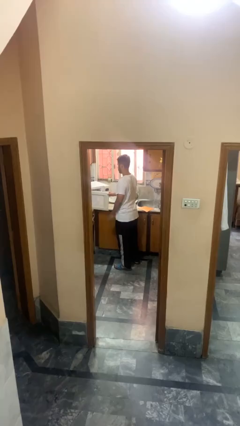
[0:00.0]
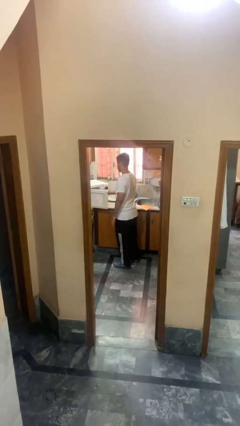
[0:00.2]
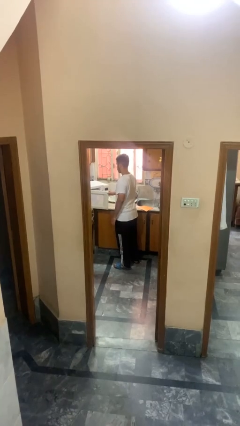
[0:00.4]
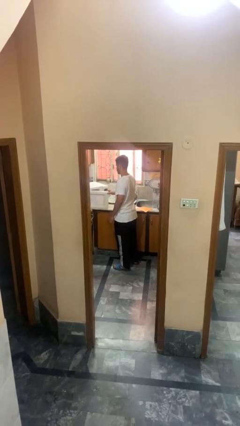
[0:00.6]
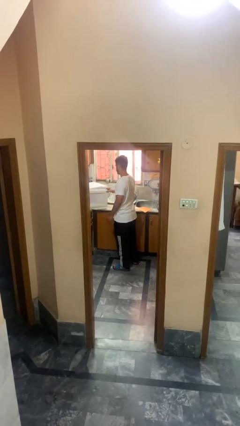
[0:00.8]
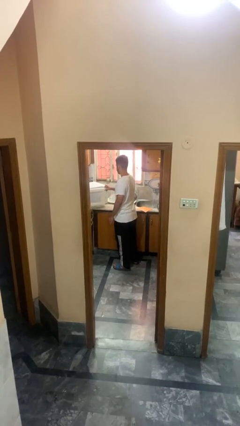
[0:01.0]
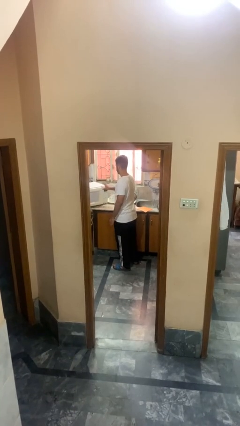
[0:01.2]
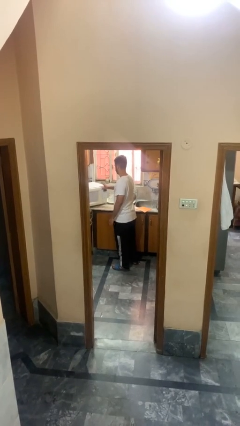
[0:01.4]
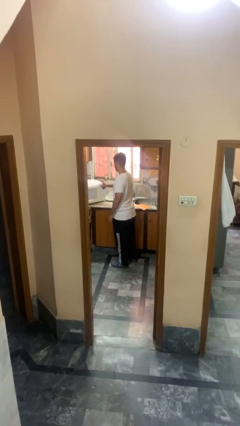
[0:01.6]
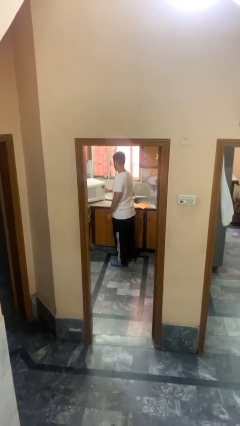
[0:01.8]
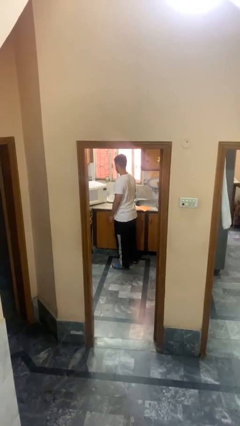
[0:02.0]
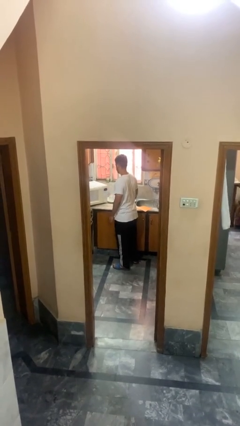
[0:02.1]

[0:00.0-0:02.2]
person closes microwave

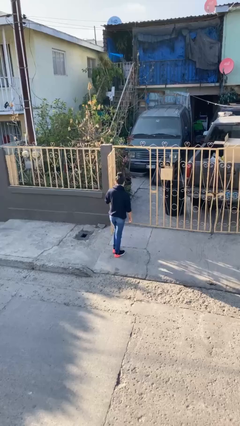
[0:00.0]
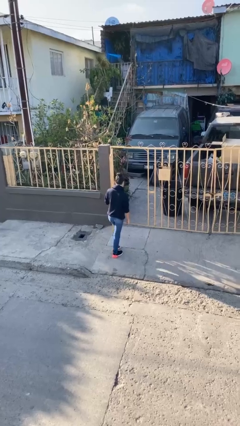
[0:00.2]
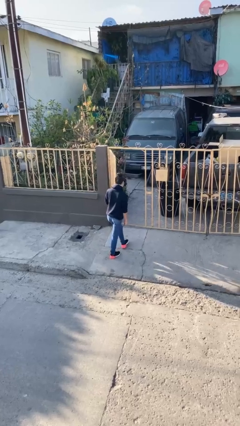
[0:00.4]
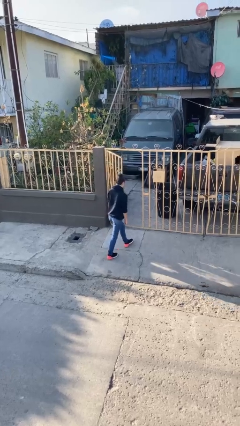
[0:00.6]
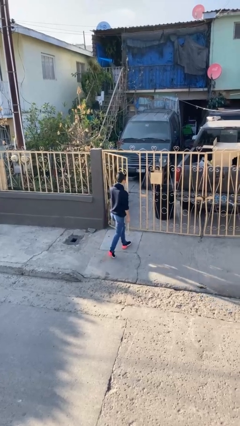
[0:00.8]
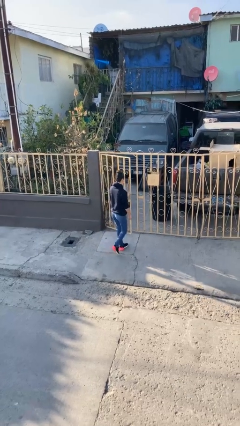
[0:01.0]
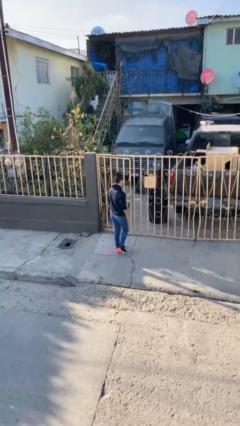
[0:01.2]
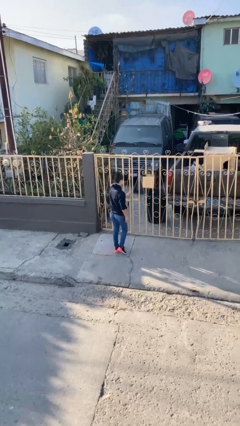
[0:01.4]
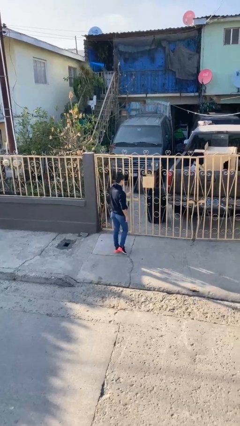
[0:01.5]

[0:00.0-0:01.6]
person closes facility door

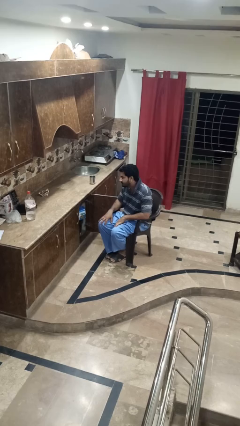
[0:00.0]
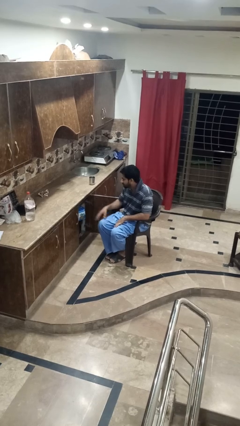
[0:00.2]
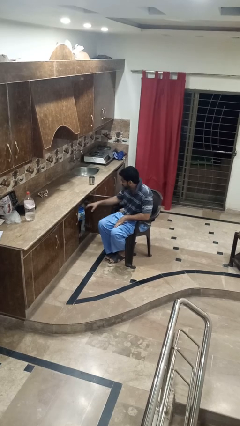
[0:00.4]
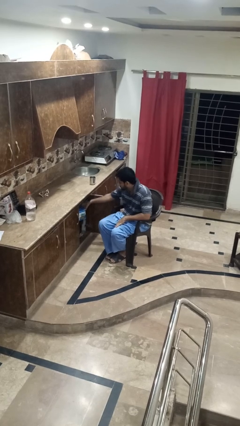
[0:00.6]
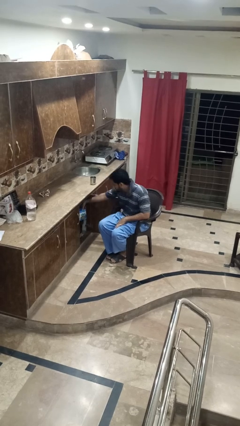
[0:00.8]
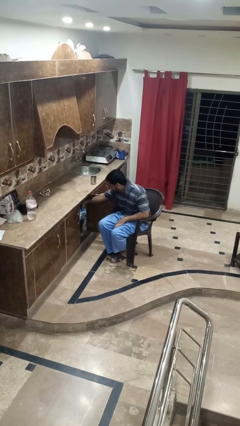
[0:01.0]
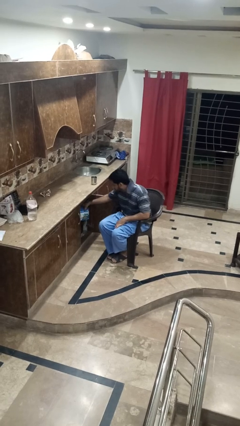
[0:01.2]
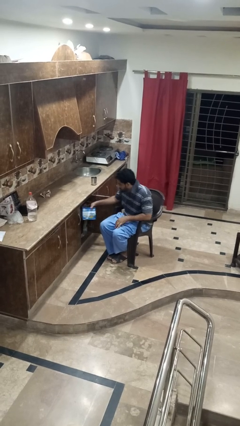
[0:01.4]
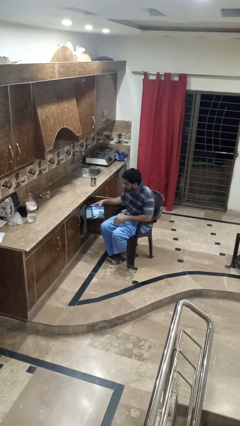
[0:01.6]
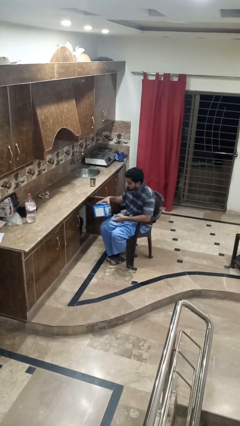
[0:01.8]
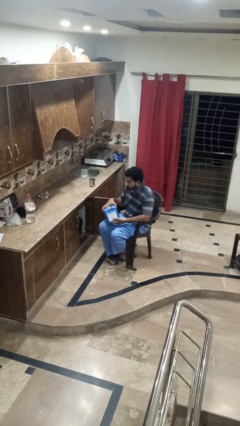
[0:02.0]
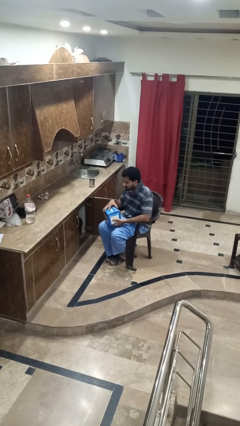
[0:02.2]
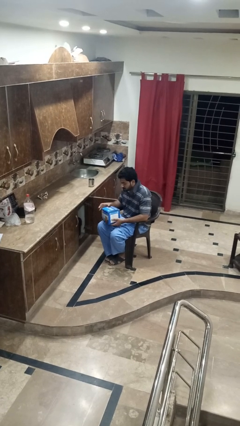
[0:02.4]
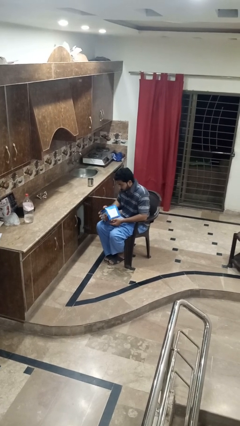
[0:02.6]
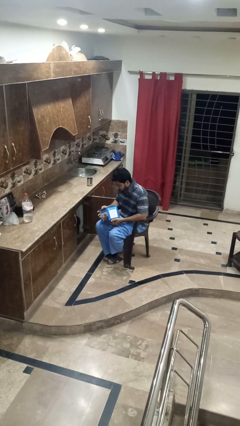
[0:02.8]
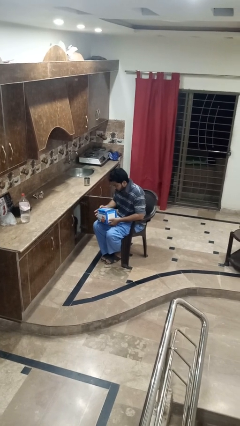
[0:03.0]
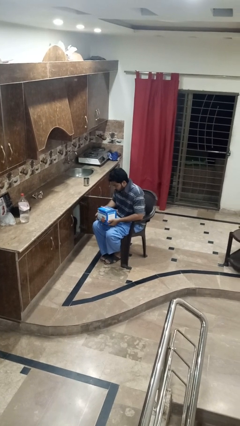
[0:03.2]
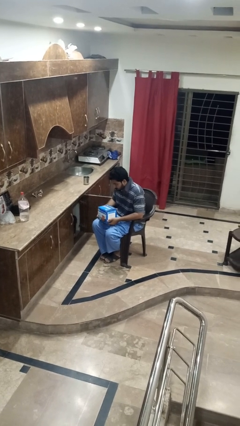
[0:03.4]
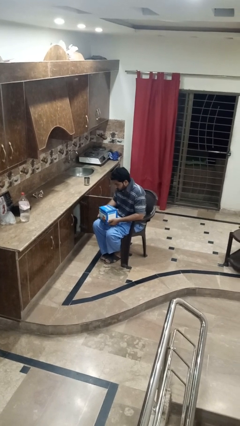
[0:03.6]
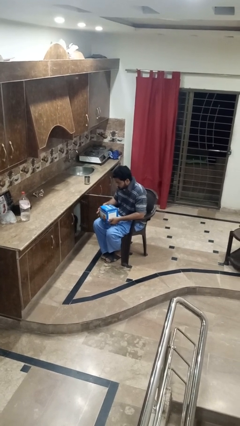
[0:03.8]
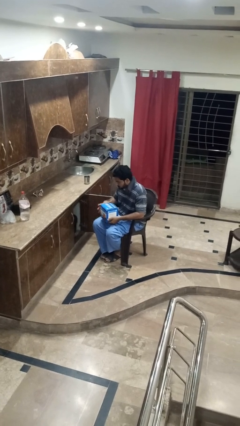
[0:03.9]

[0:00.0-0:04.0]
person picks up object from cabinet

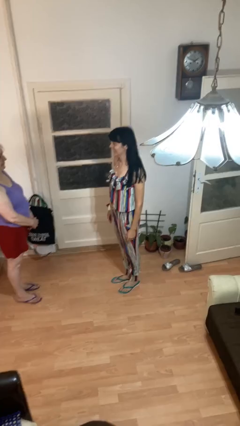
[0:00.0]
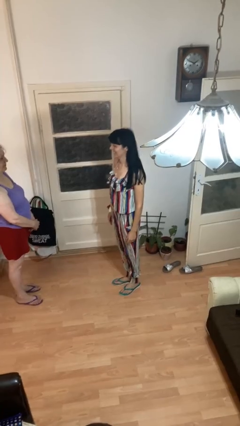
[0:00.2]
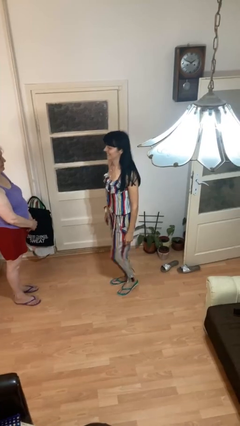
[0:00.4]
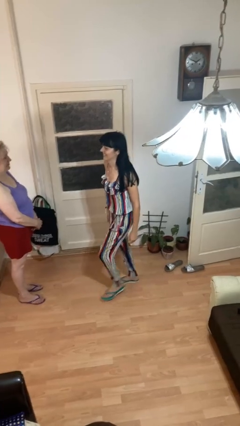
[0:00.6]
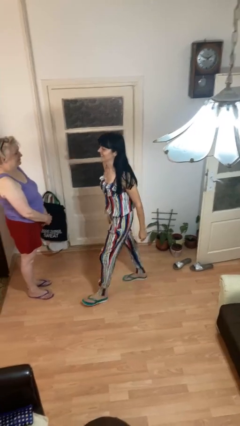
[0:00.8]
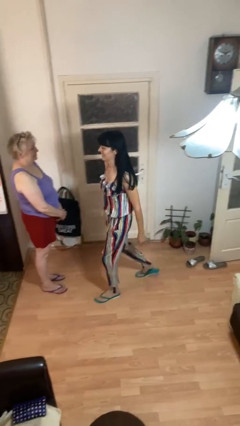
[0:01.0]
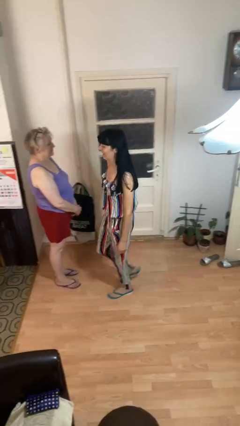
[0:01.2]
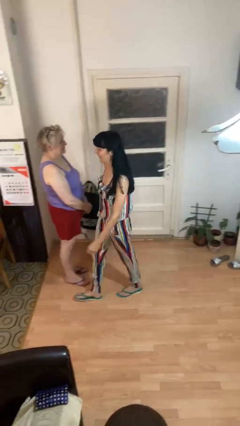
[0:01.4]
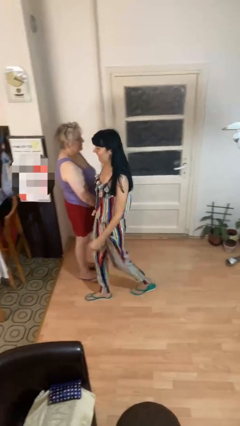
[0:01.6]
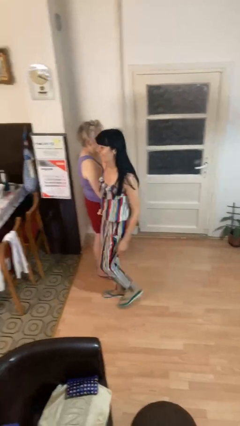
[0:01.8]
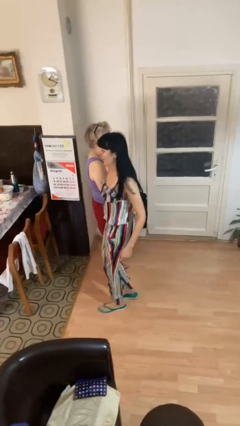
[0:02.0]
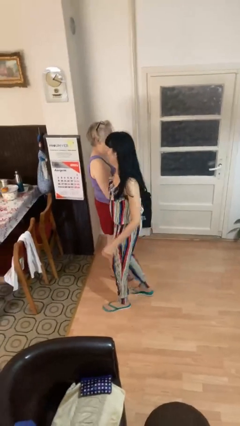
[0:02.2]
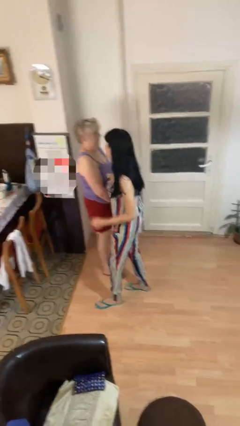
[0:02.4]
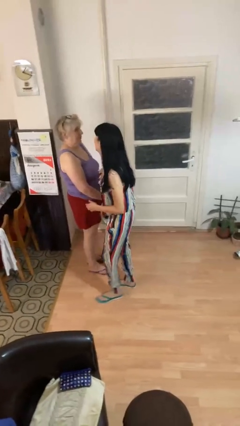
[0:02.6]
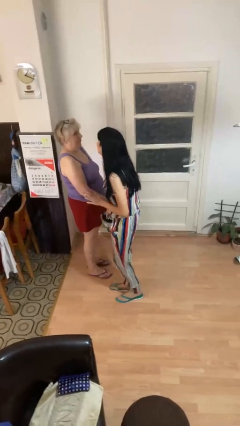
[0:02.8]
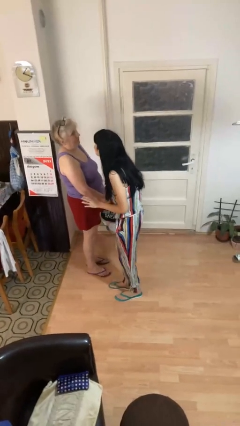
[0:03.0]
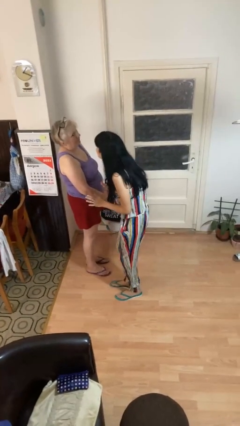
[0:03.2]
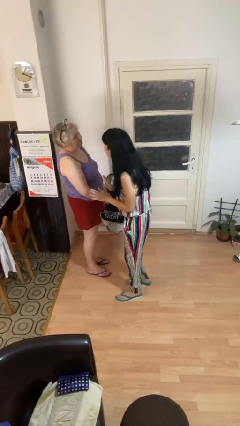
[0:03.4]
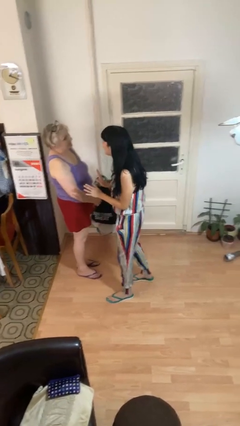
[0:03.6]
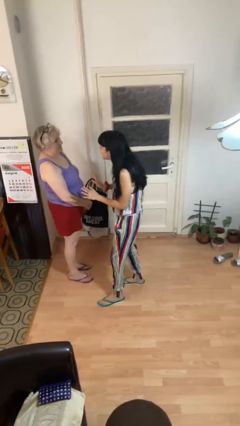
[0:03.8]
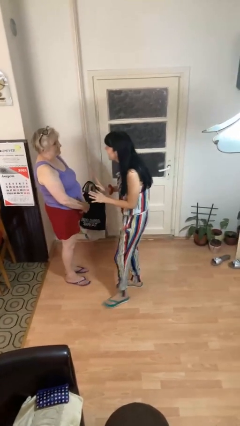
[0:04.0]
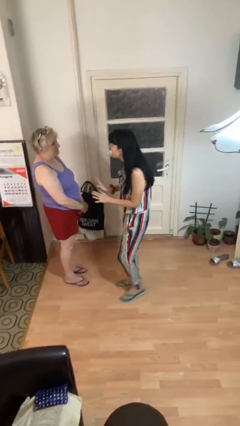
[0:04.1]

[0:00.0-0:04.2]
person bumps into person

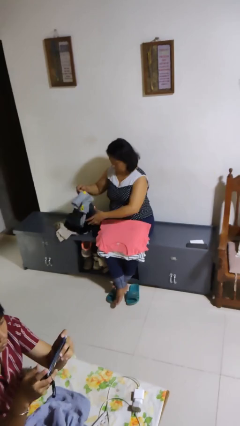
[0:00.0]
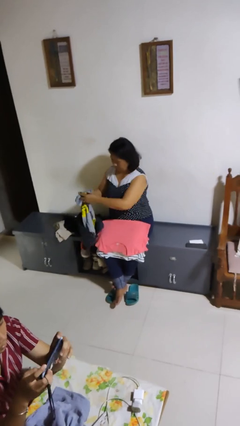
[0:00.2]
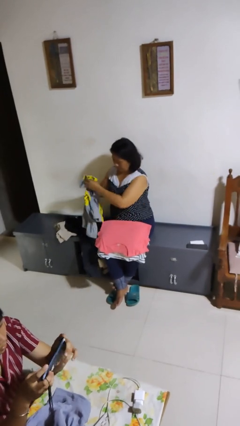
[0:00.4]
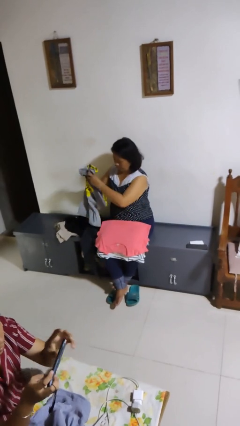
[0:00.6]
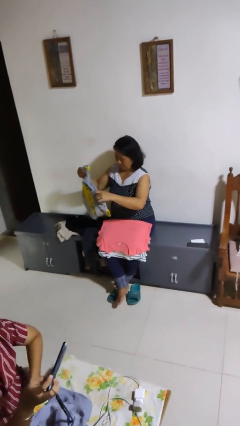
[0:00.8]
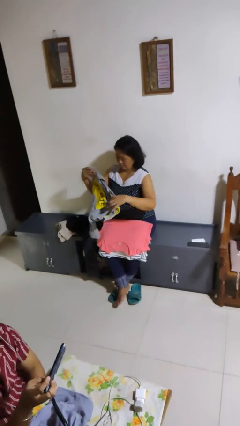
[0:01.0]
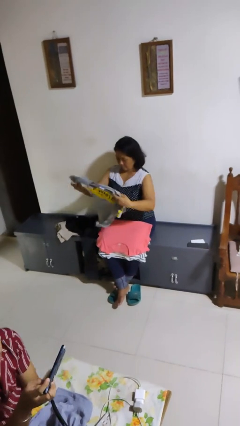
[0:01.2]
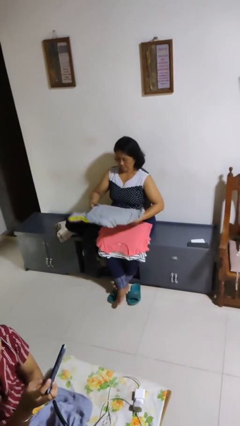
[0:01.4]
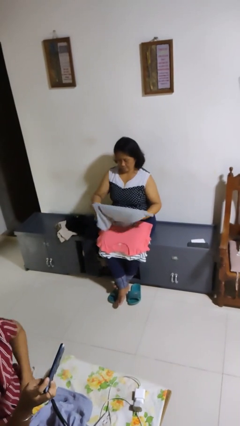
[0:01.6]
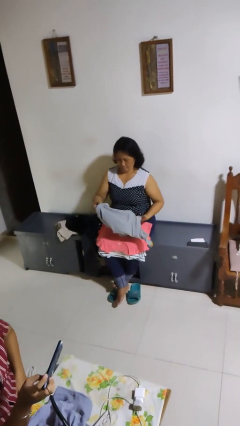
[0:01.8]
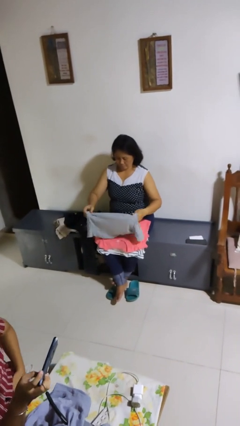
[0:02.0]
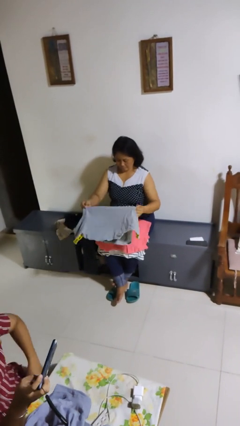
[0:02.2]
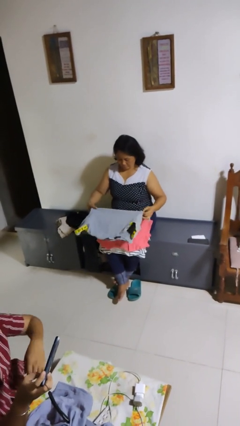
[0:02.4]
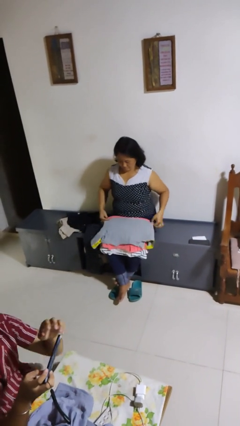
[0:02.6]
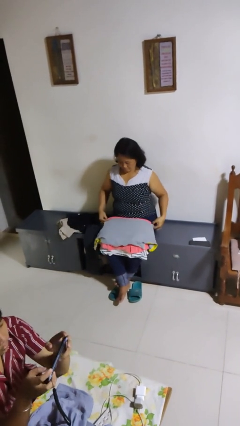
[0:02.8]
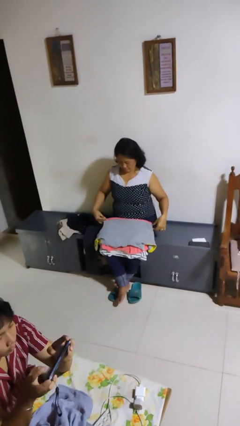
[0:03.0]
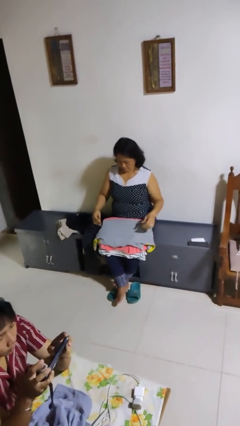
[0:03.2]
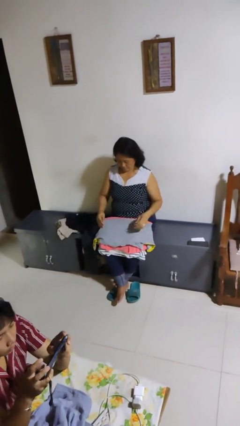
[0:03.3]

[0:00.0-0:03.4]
person folds shirt

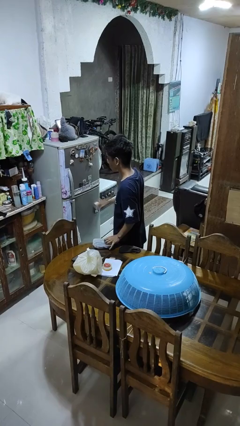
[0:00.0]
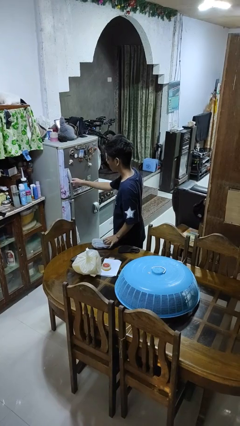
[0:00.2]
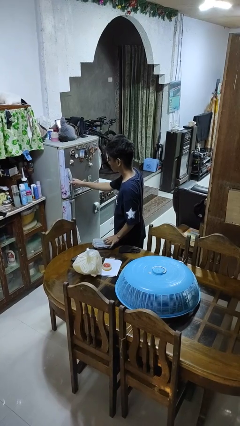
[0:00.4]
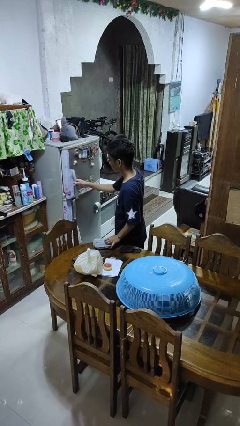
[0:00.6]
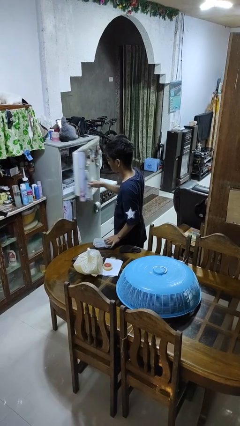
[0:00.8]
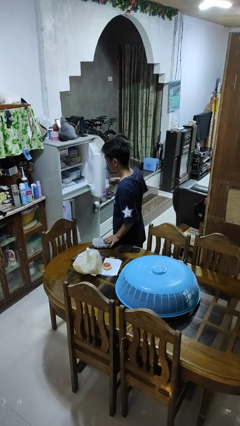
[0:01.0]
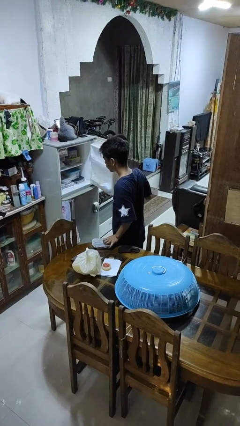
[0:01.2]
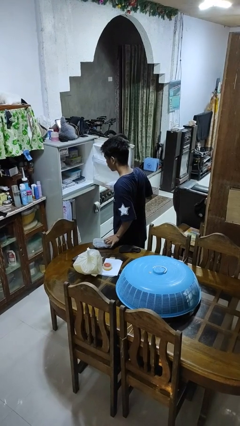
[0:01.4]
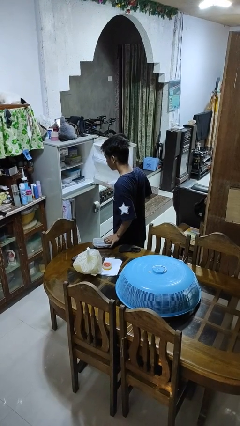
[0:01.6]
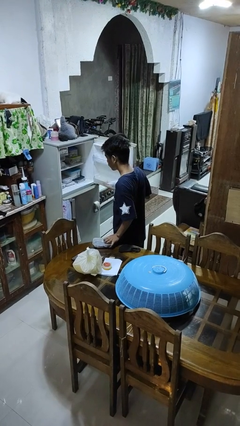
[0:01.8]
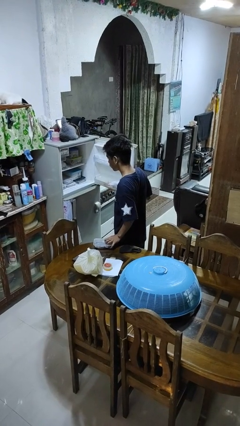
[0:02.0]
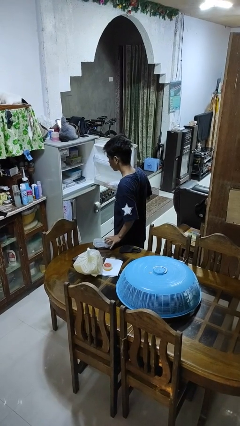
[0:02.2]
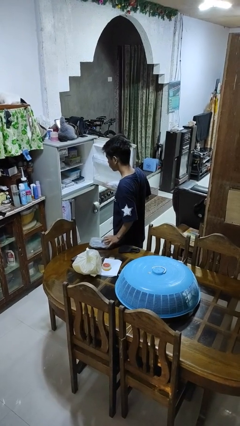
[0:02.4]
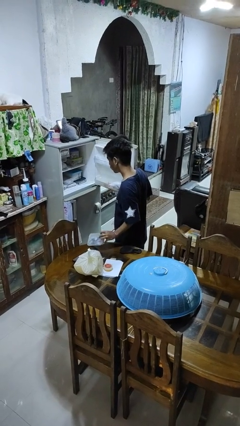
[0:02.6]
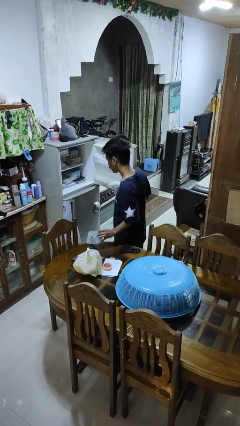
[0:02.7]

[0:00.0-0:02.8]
person opens refrigerator
